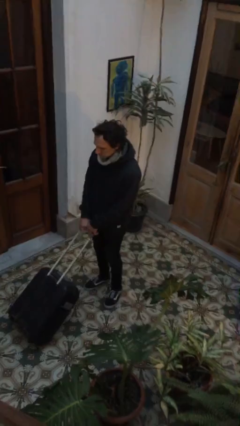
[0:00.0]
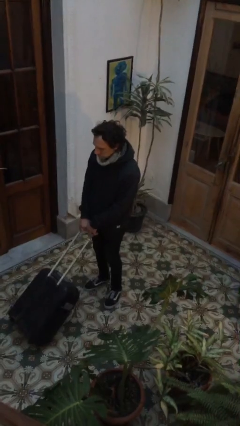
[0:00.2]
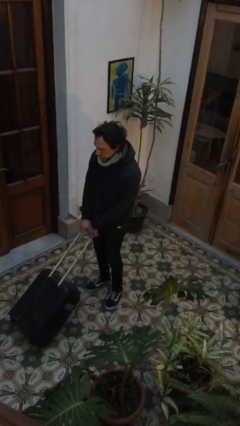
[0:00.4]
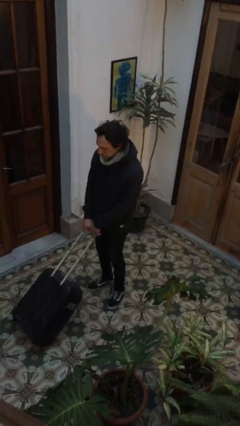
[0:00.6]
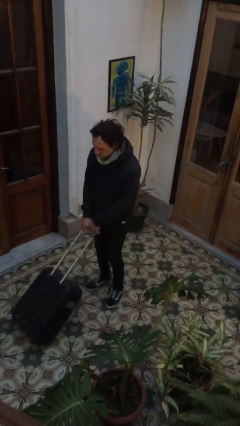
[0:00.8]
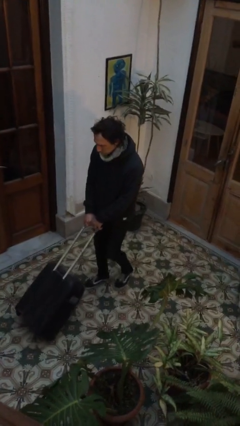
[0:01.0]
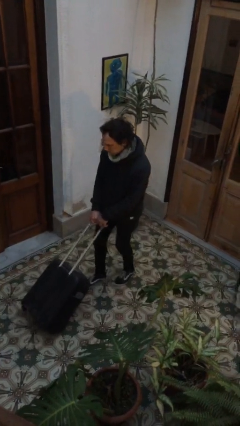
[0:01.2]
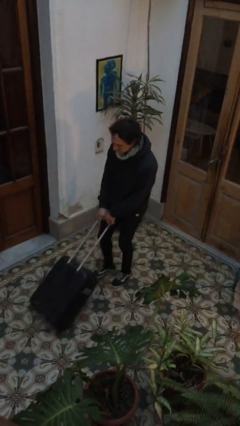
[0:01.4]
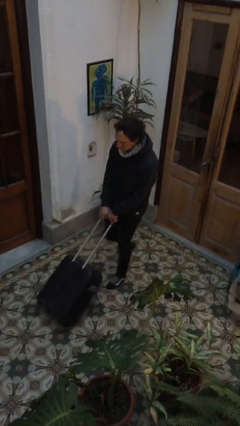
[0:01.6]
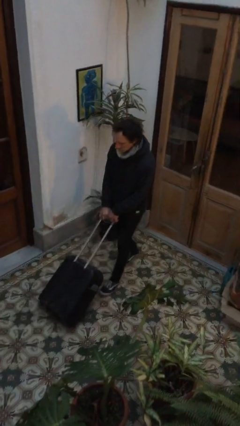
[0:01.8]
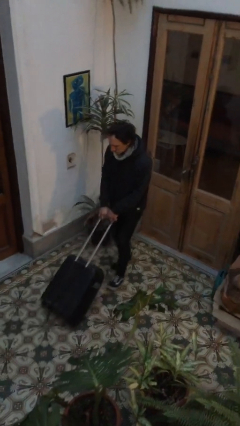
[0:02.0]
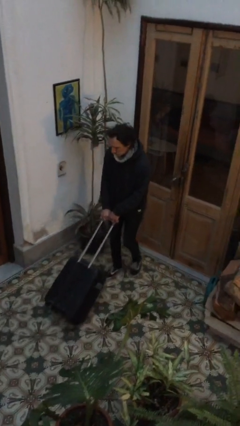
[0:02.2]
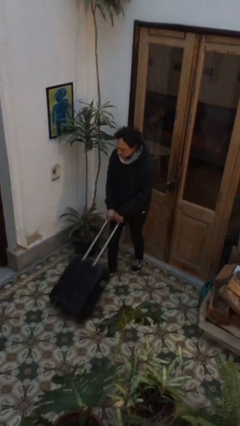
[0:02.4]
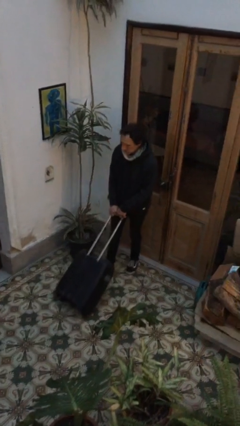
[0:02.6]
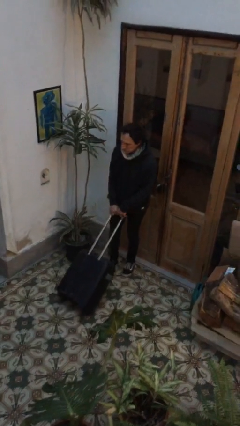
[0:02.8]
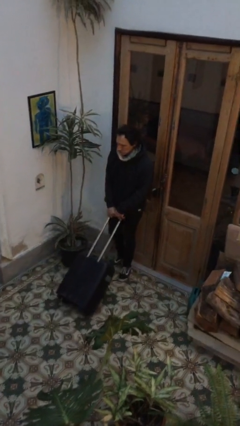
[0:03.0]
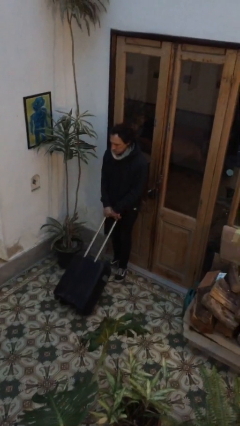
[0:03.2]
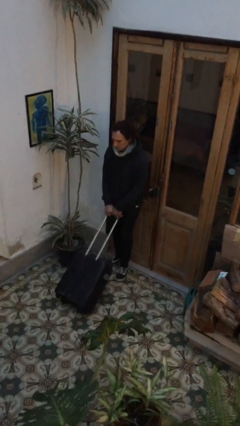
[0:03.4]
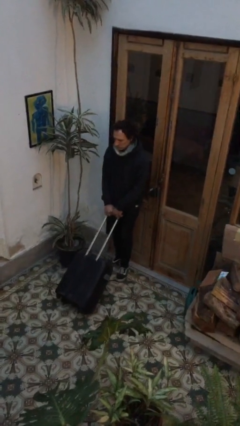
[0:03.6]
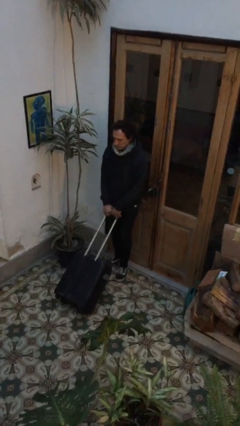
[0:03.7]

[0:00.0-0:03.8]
person pulls wheeled cart

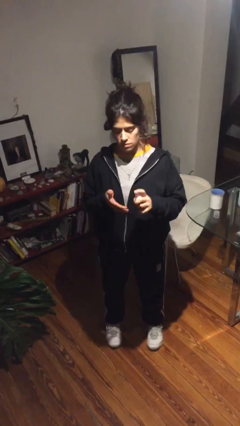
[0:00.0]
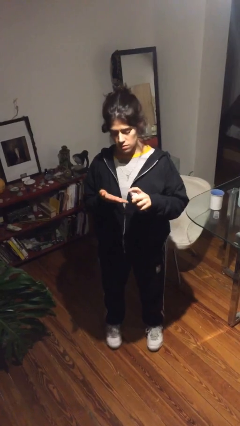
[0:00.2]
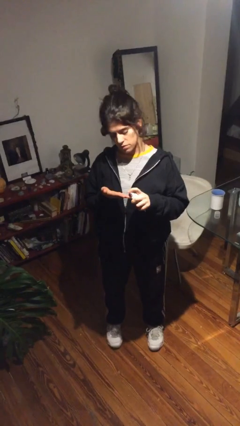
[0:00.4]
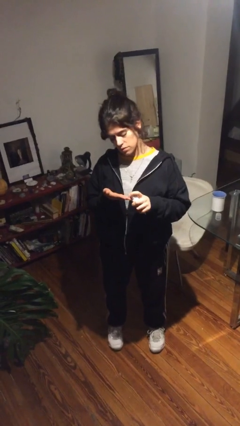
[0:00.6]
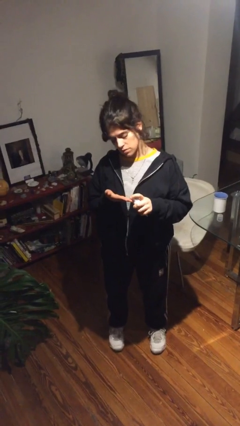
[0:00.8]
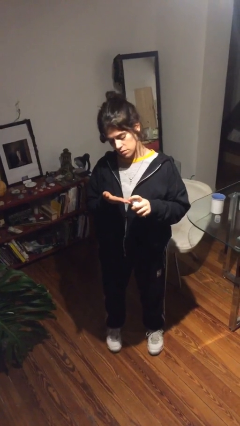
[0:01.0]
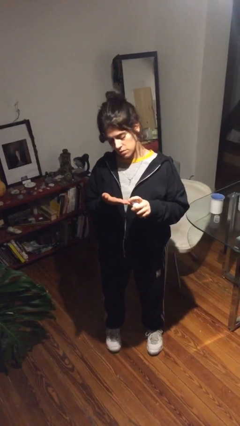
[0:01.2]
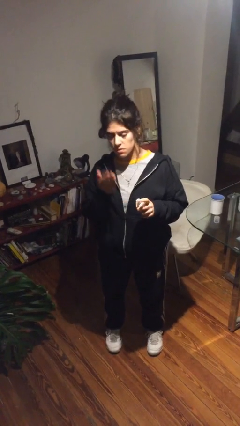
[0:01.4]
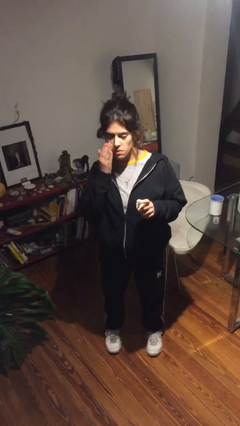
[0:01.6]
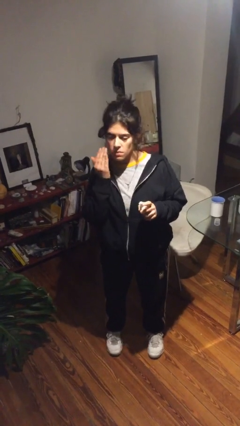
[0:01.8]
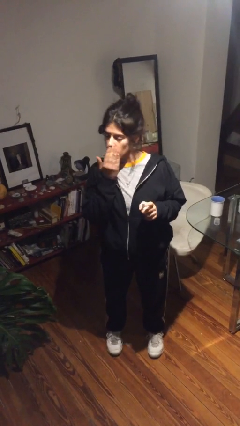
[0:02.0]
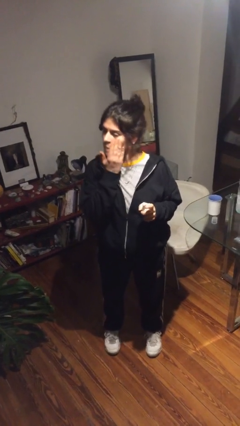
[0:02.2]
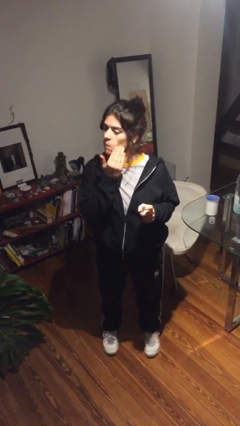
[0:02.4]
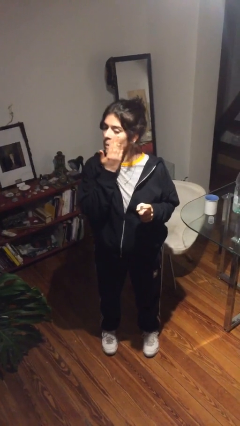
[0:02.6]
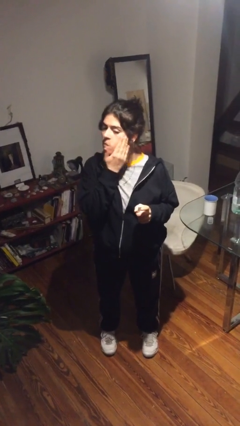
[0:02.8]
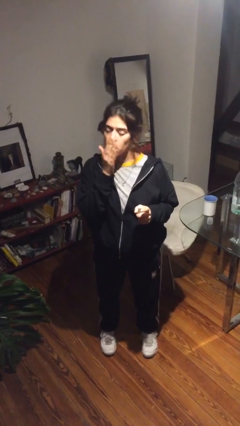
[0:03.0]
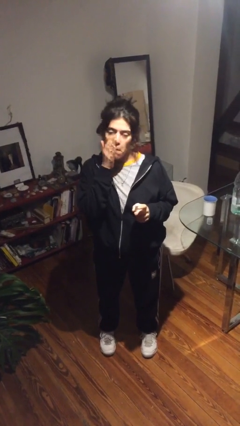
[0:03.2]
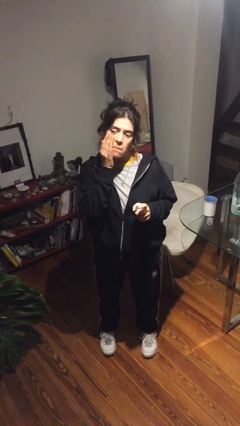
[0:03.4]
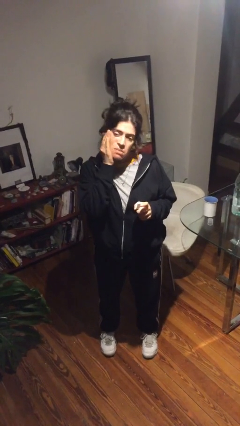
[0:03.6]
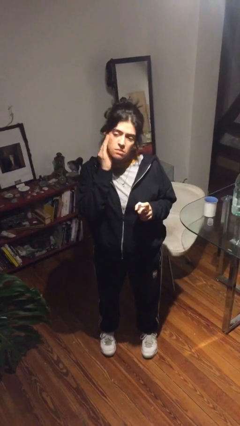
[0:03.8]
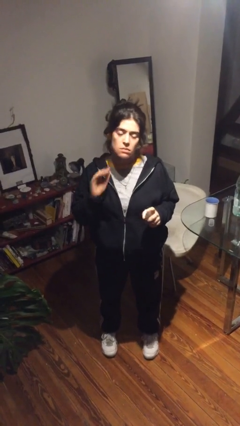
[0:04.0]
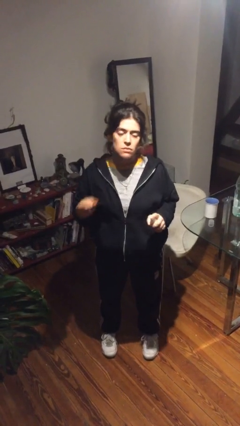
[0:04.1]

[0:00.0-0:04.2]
person applies facial moisturizer

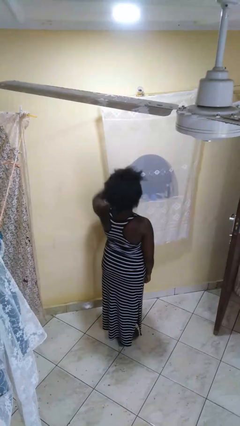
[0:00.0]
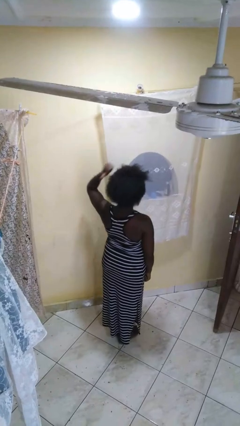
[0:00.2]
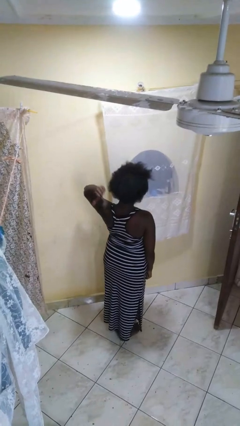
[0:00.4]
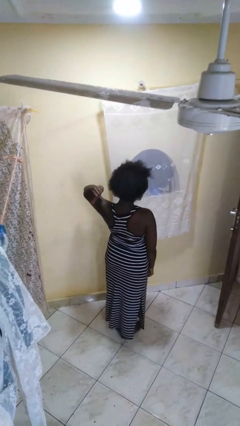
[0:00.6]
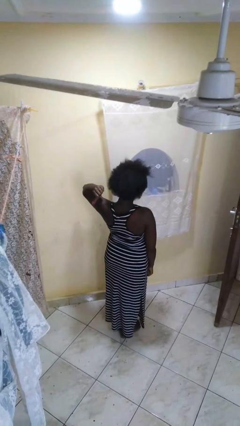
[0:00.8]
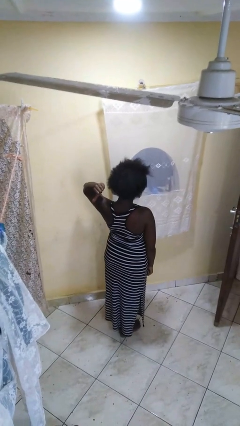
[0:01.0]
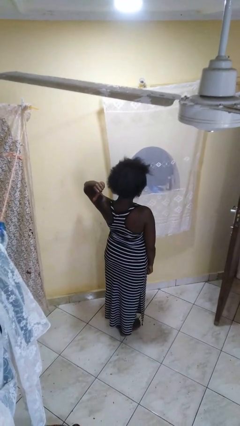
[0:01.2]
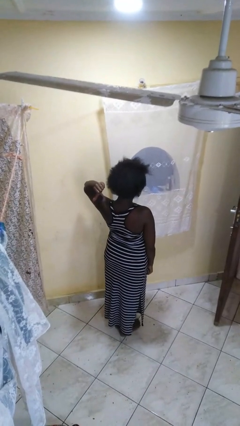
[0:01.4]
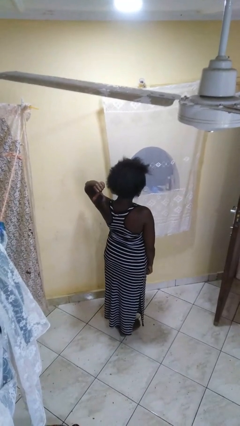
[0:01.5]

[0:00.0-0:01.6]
person gestures behind me

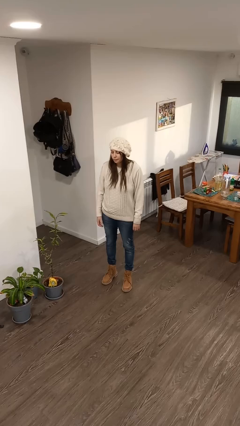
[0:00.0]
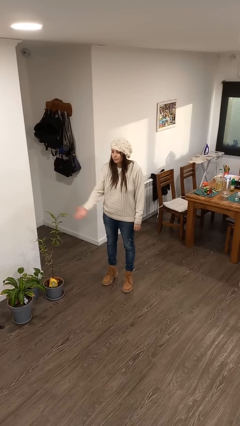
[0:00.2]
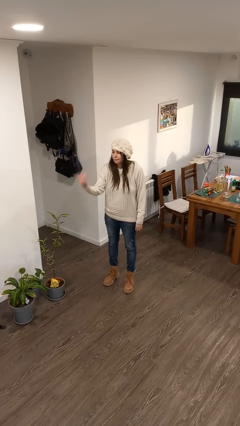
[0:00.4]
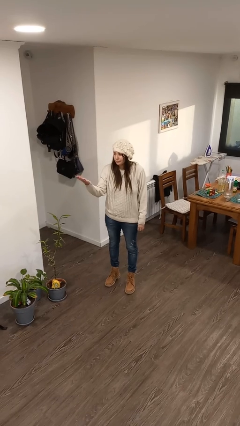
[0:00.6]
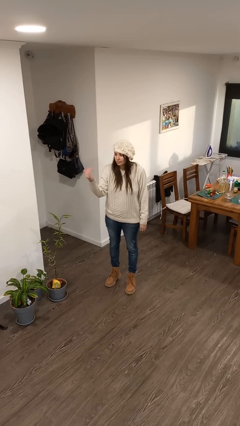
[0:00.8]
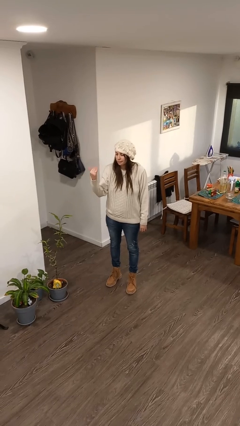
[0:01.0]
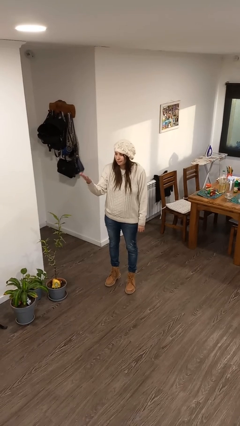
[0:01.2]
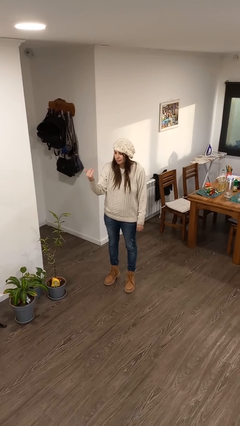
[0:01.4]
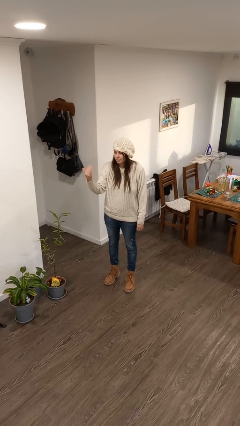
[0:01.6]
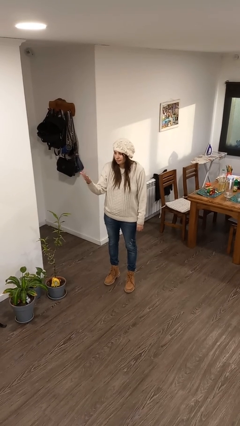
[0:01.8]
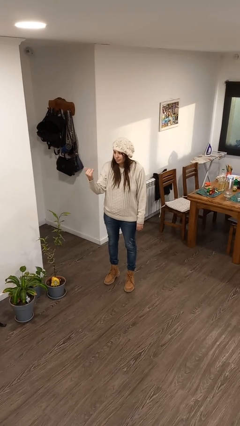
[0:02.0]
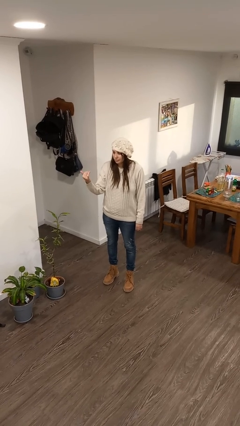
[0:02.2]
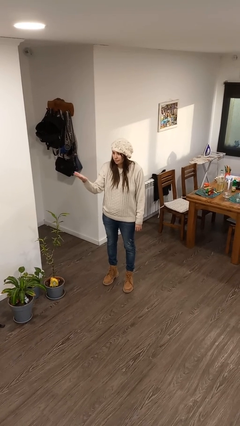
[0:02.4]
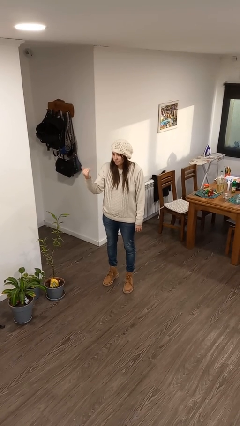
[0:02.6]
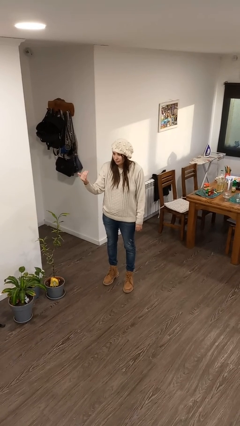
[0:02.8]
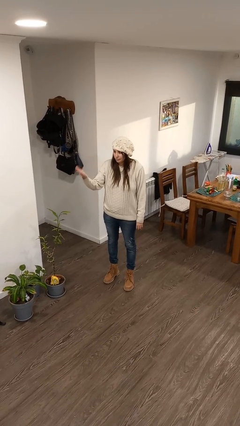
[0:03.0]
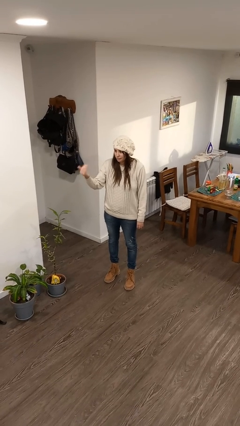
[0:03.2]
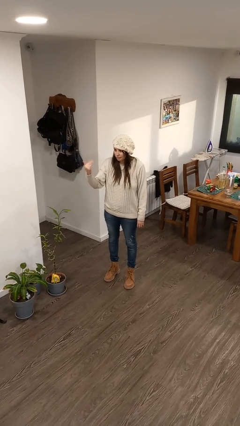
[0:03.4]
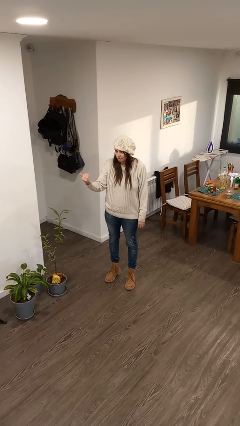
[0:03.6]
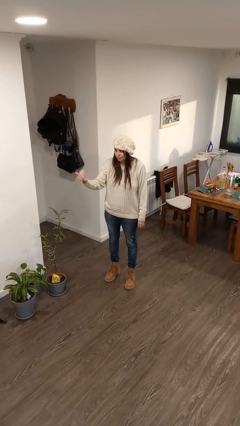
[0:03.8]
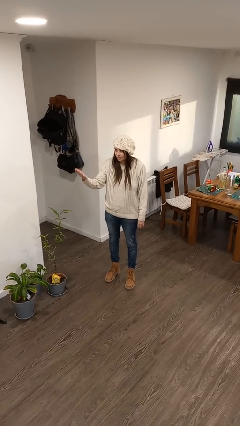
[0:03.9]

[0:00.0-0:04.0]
person gestures come here

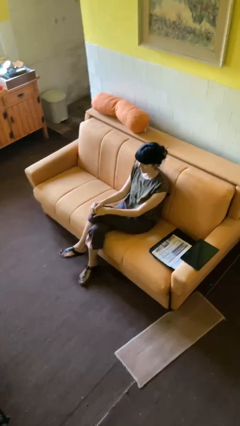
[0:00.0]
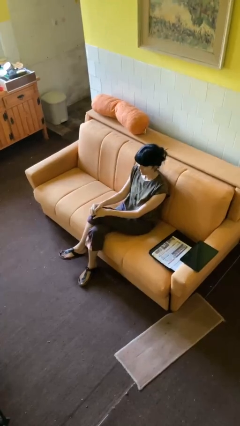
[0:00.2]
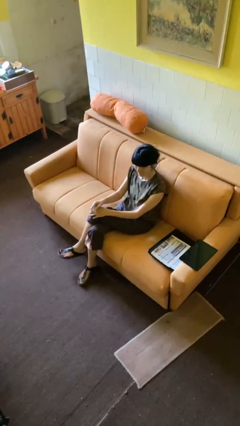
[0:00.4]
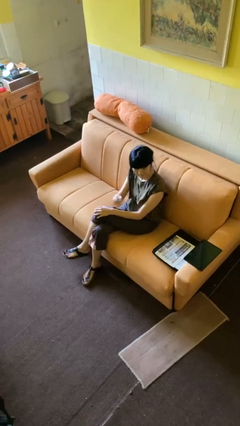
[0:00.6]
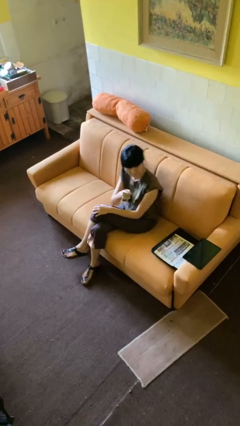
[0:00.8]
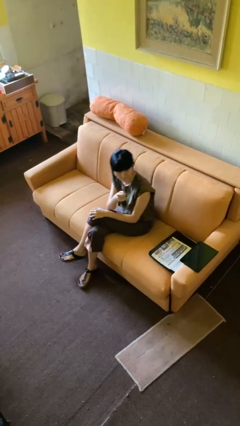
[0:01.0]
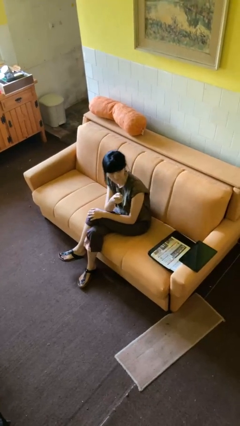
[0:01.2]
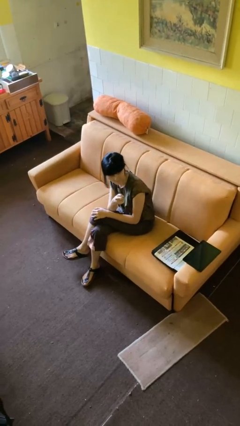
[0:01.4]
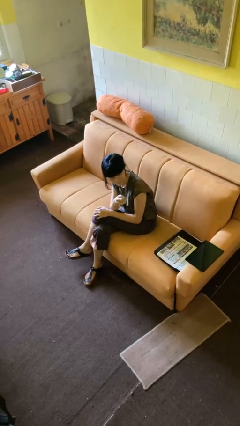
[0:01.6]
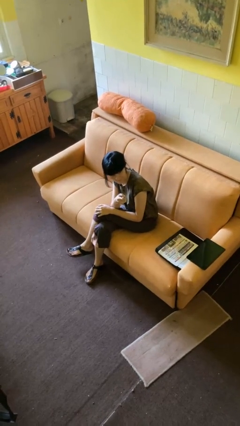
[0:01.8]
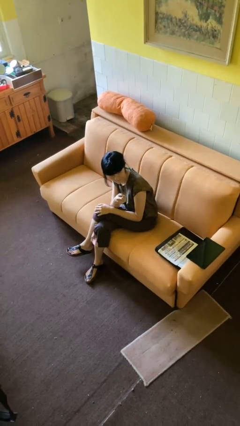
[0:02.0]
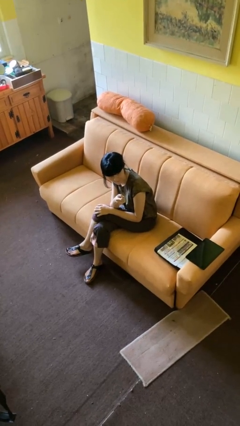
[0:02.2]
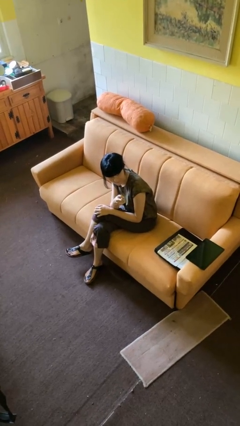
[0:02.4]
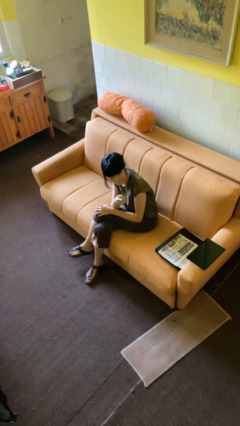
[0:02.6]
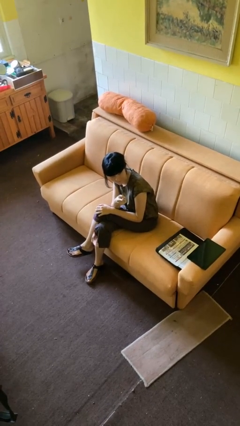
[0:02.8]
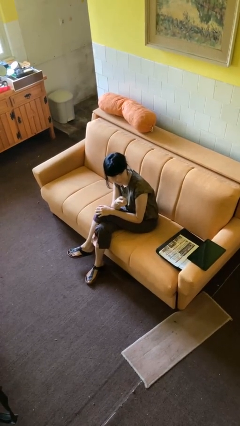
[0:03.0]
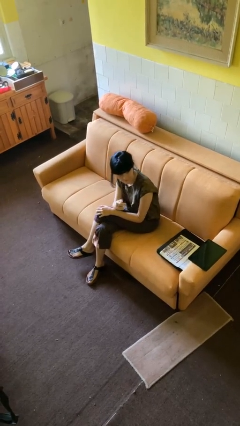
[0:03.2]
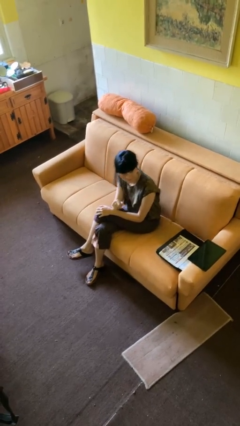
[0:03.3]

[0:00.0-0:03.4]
person points at person

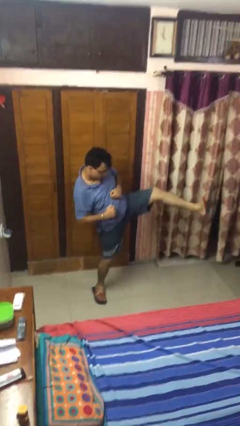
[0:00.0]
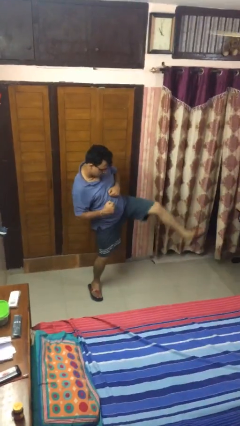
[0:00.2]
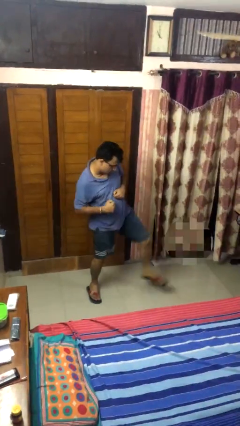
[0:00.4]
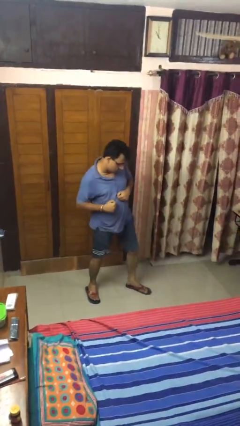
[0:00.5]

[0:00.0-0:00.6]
person karate kicks
